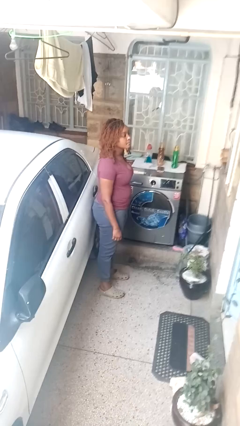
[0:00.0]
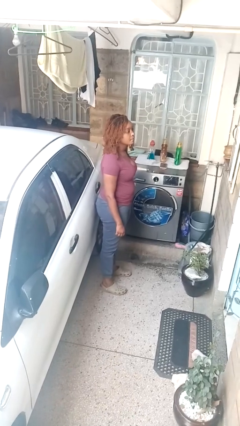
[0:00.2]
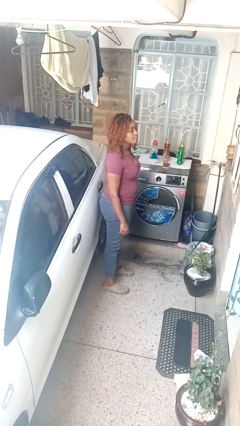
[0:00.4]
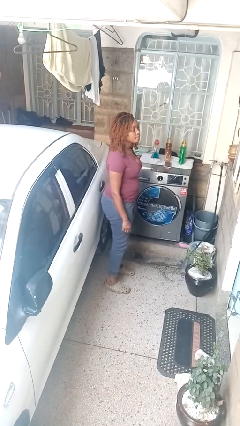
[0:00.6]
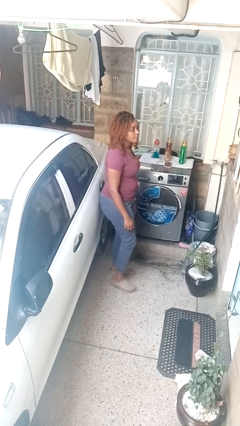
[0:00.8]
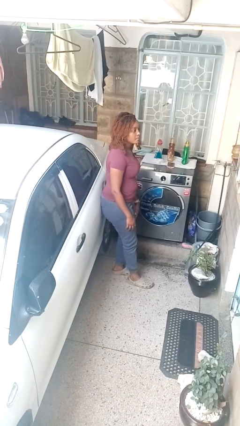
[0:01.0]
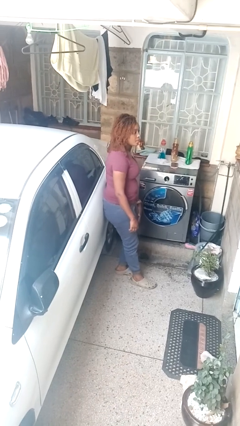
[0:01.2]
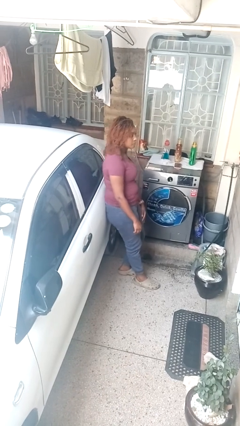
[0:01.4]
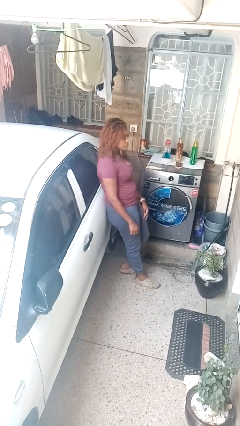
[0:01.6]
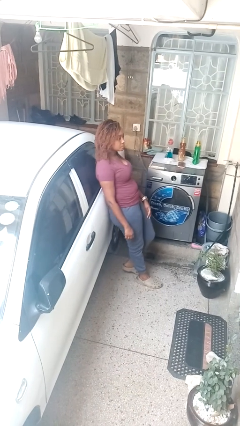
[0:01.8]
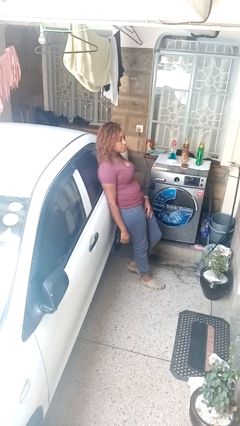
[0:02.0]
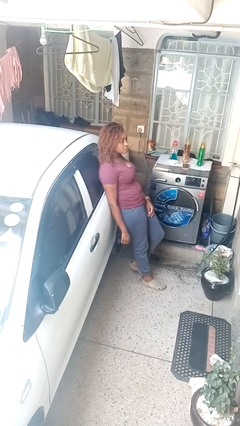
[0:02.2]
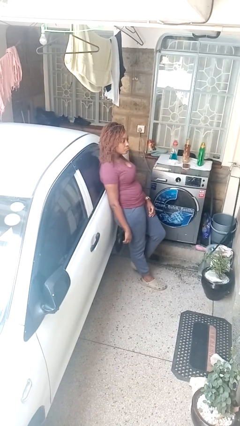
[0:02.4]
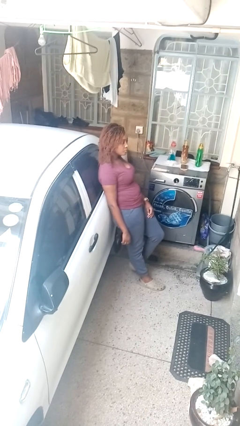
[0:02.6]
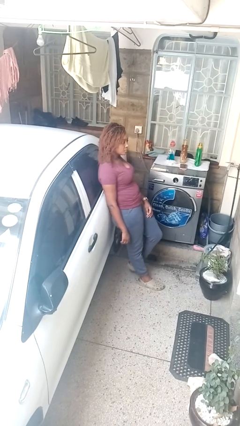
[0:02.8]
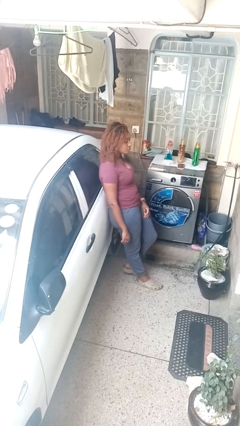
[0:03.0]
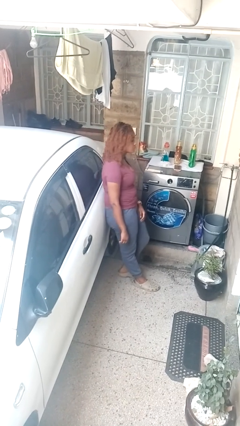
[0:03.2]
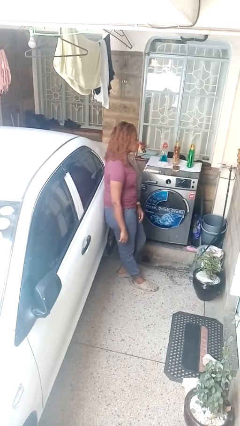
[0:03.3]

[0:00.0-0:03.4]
person leans against car

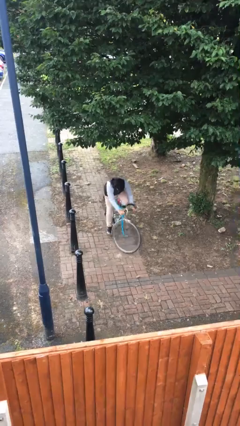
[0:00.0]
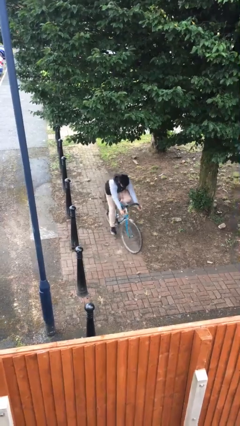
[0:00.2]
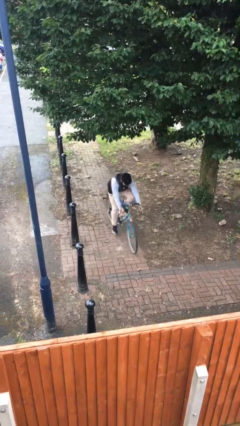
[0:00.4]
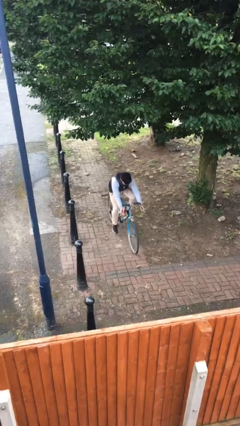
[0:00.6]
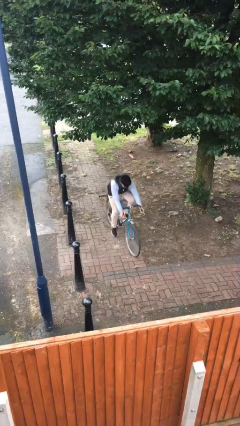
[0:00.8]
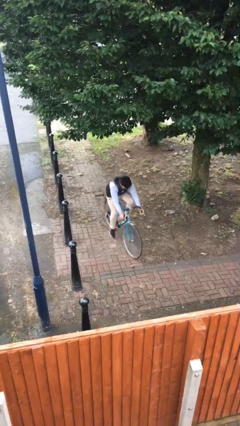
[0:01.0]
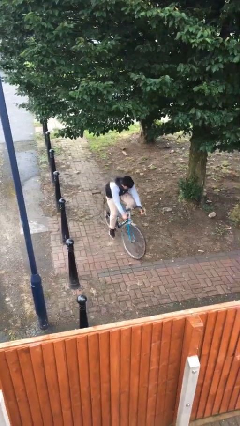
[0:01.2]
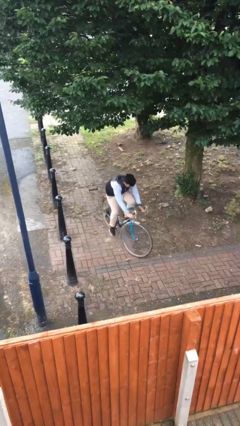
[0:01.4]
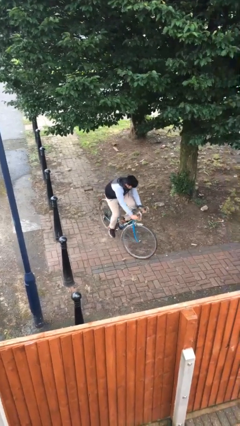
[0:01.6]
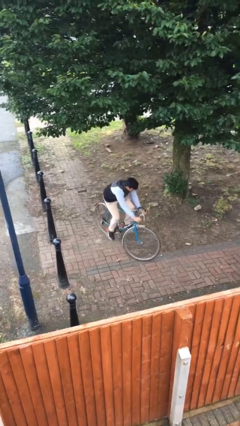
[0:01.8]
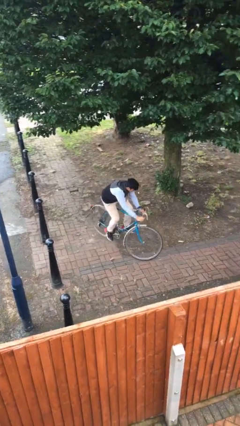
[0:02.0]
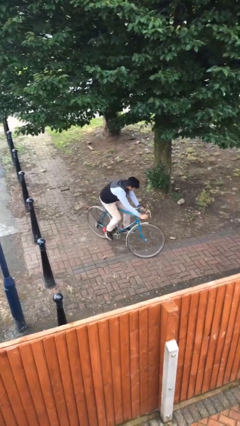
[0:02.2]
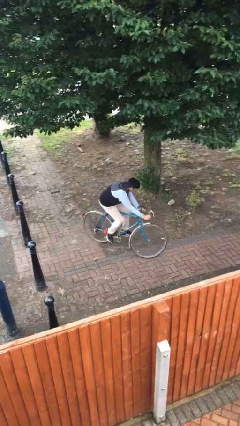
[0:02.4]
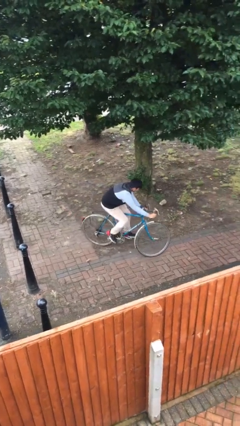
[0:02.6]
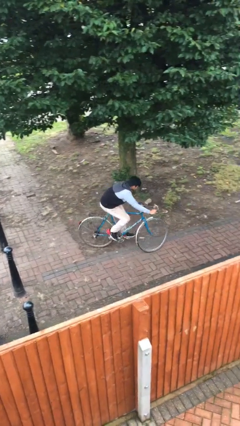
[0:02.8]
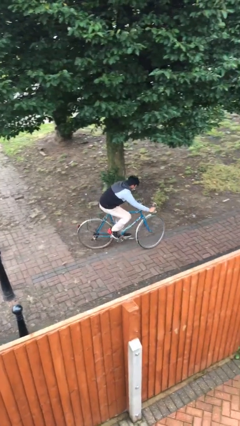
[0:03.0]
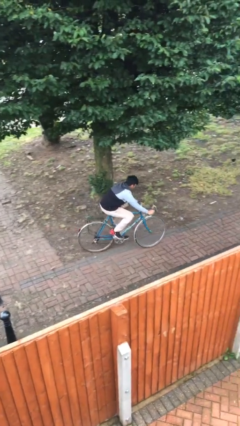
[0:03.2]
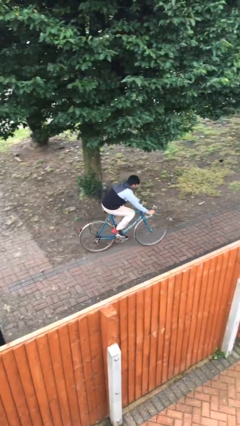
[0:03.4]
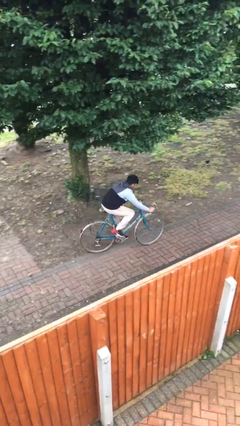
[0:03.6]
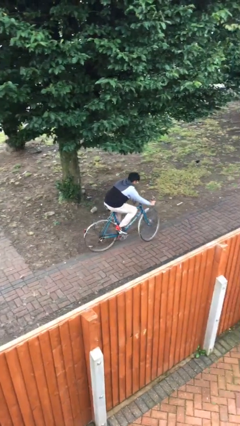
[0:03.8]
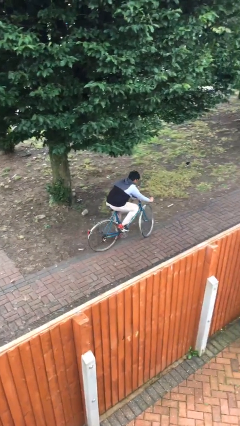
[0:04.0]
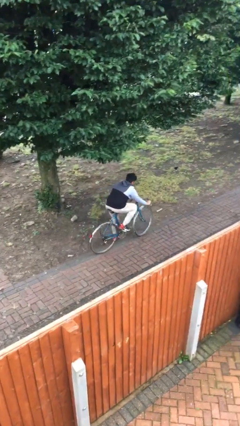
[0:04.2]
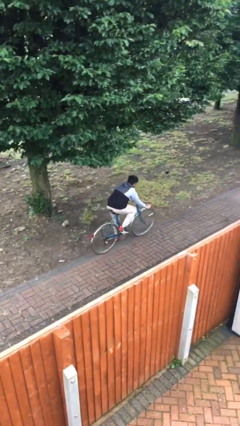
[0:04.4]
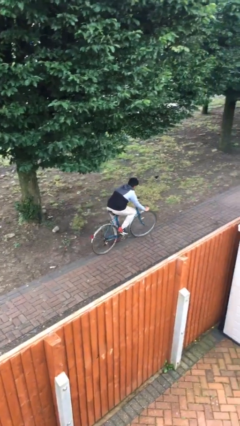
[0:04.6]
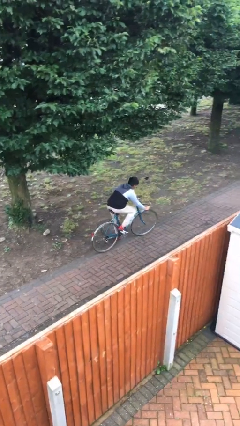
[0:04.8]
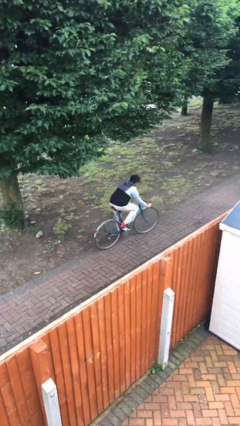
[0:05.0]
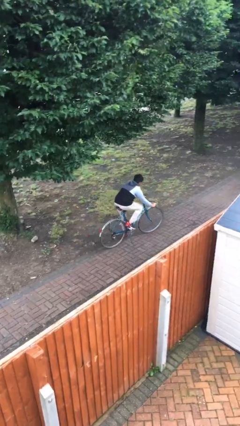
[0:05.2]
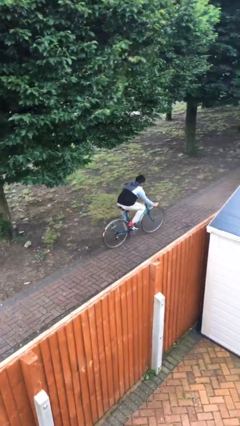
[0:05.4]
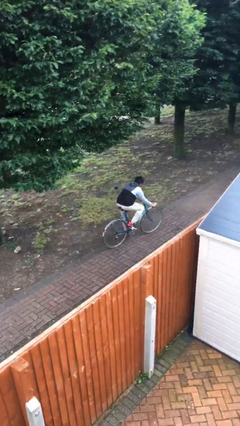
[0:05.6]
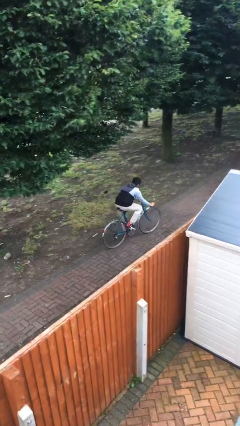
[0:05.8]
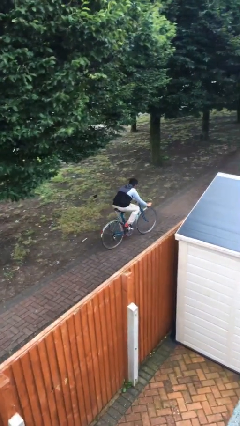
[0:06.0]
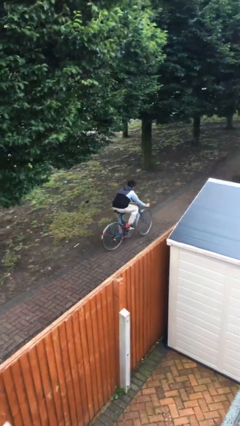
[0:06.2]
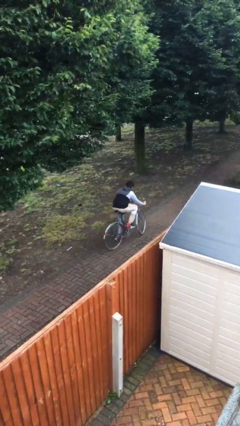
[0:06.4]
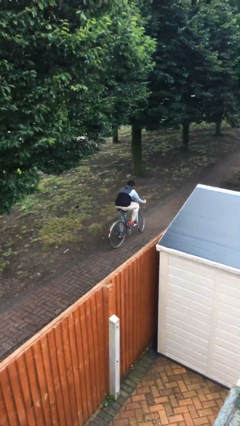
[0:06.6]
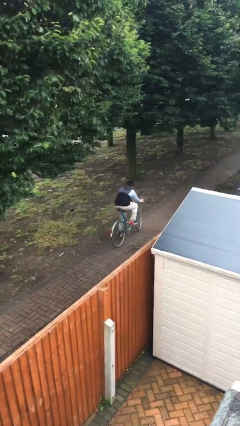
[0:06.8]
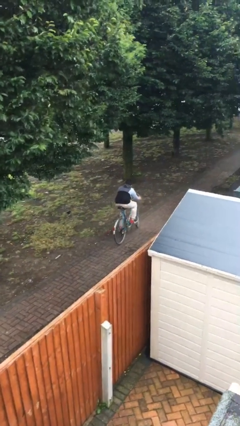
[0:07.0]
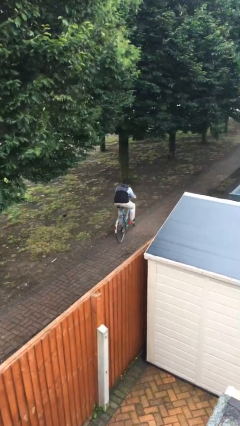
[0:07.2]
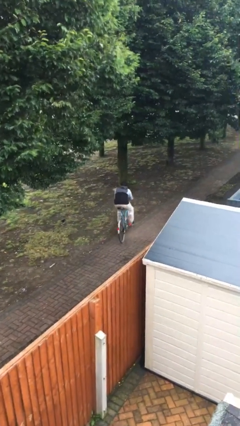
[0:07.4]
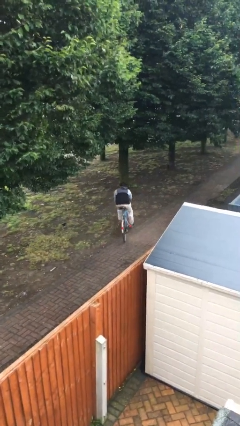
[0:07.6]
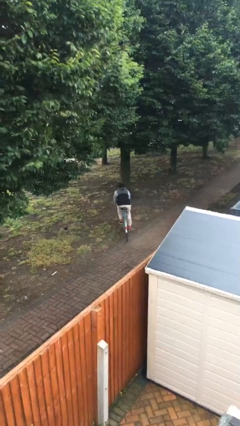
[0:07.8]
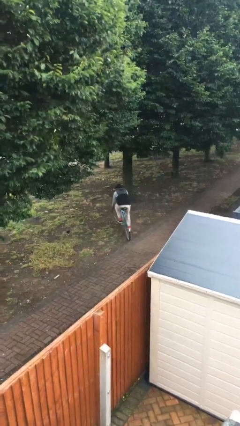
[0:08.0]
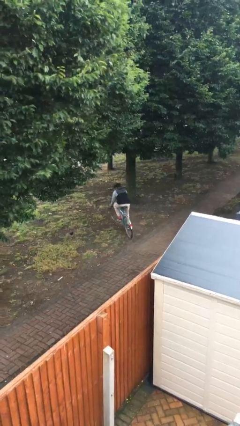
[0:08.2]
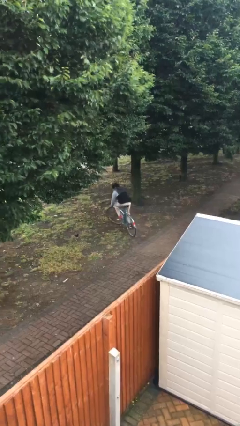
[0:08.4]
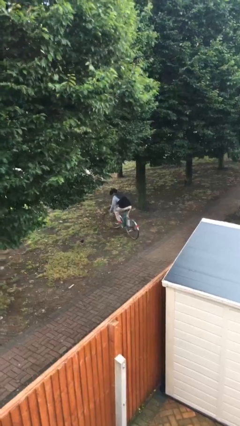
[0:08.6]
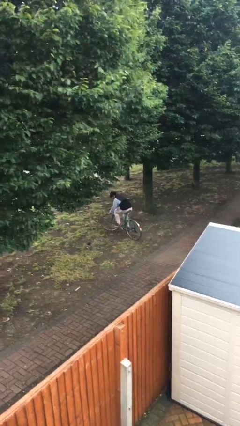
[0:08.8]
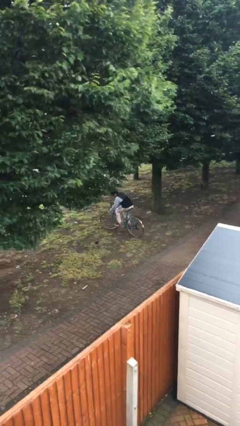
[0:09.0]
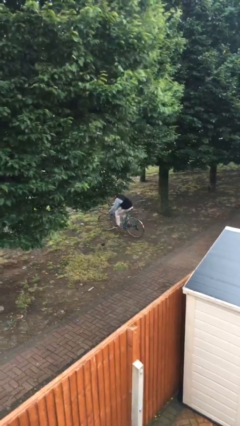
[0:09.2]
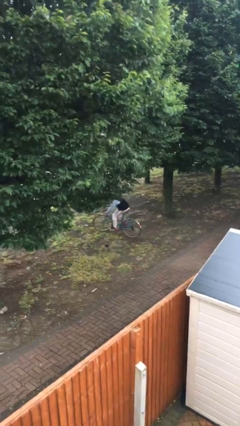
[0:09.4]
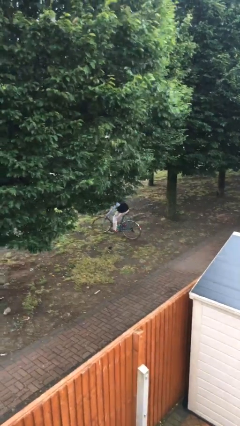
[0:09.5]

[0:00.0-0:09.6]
person rides bicycle

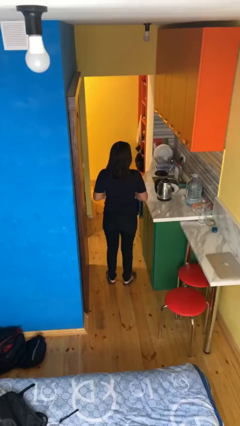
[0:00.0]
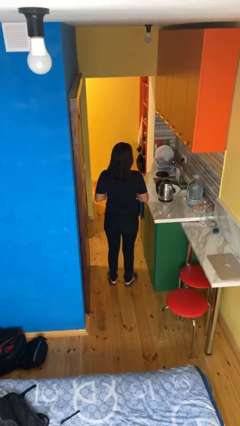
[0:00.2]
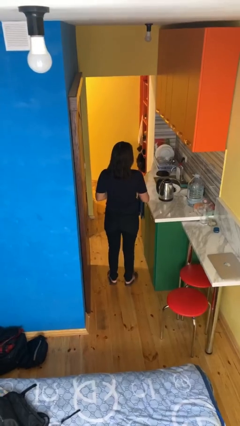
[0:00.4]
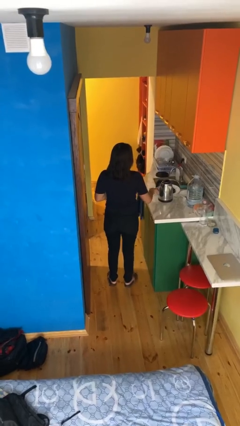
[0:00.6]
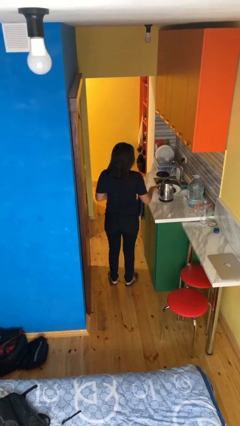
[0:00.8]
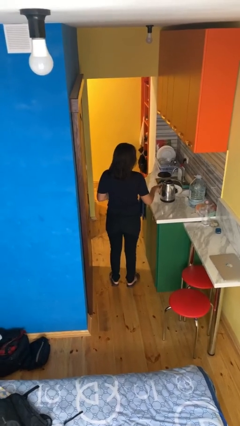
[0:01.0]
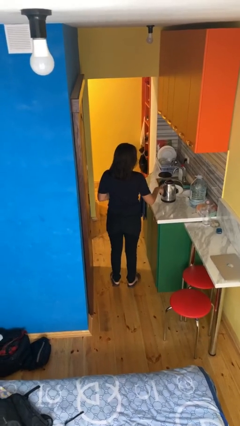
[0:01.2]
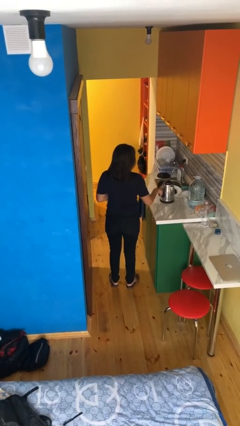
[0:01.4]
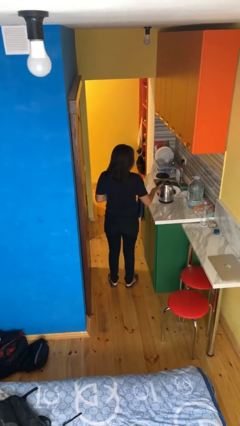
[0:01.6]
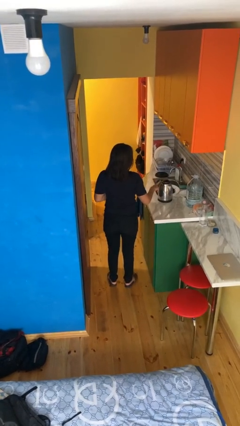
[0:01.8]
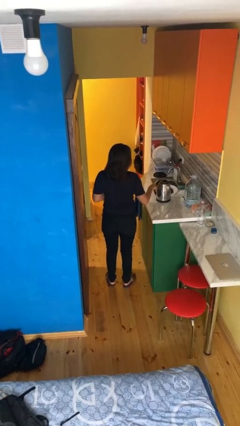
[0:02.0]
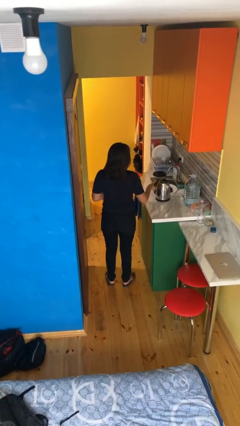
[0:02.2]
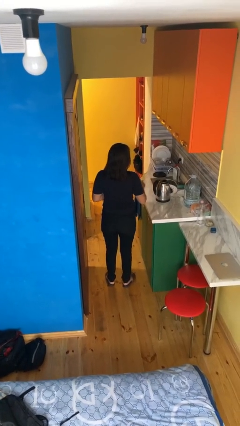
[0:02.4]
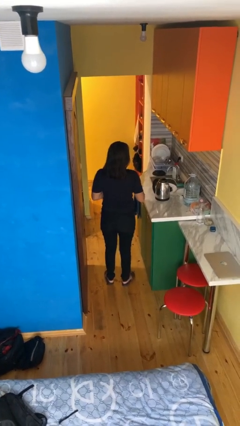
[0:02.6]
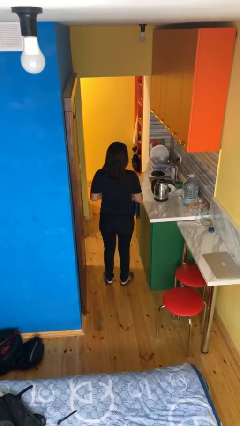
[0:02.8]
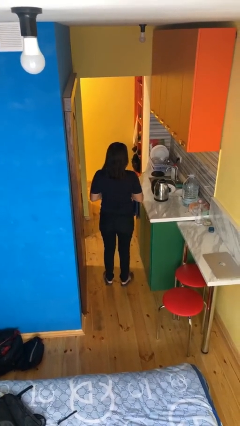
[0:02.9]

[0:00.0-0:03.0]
person taps object with finger

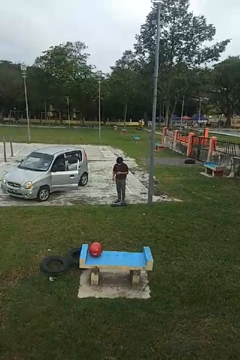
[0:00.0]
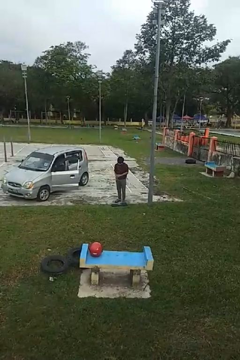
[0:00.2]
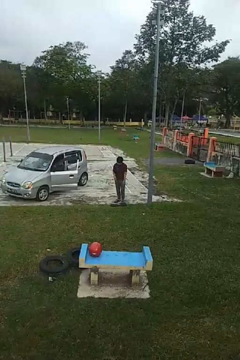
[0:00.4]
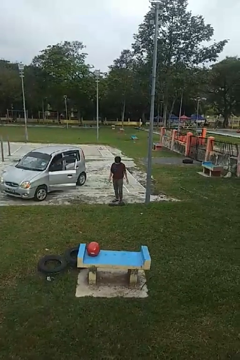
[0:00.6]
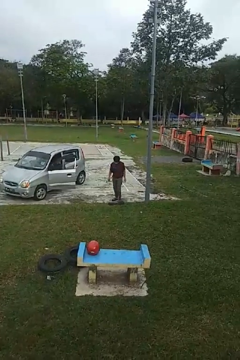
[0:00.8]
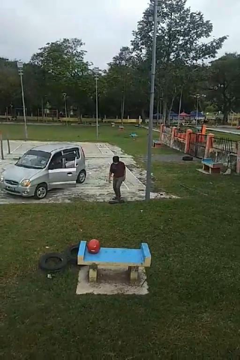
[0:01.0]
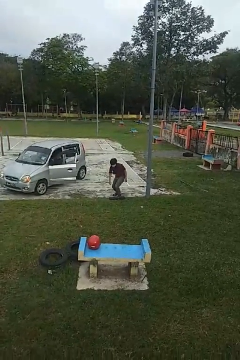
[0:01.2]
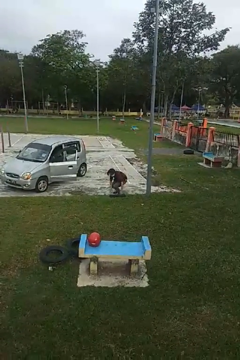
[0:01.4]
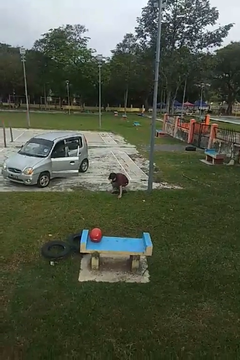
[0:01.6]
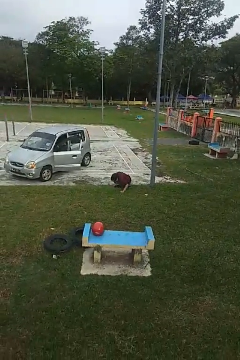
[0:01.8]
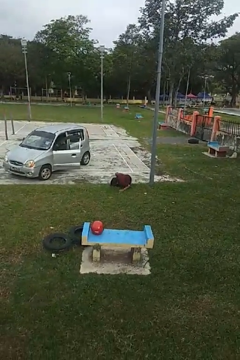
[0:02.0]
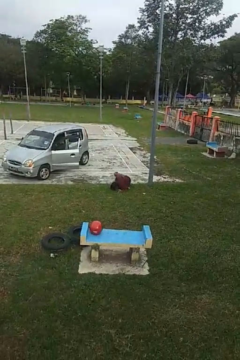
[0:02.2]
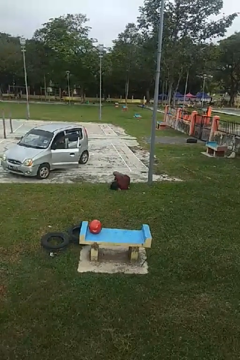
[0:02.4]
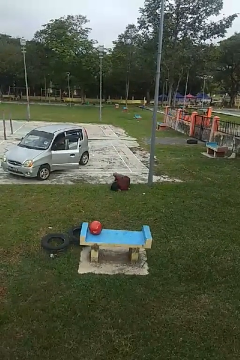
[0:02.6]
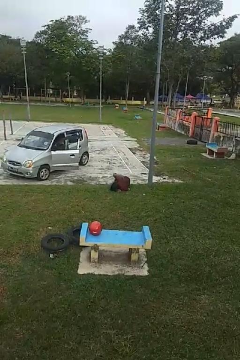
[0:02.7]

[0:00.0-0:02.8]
person trips on object on floor
